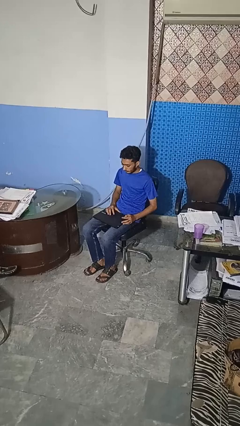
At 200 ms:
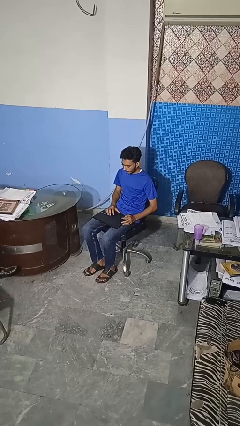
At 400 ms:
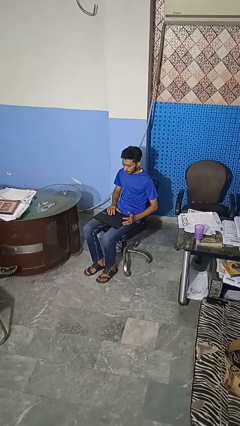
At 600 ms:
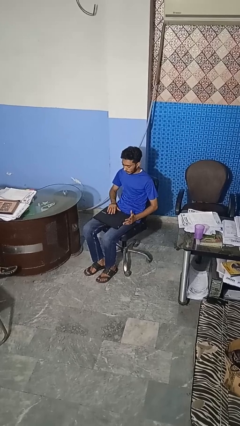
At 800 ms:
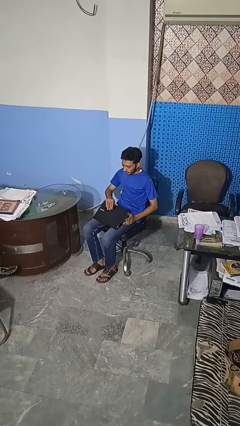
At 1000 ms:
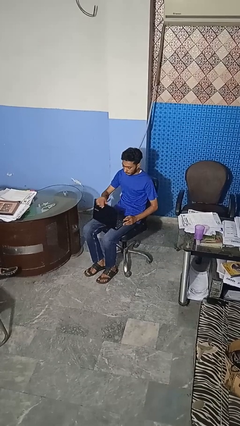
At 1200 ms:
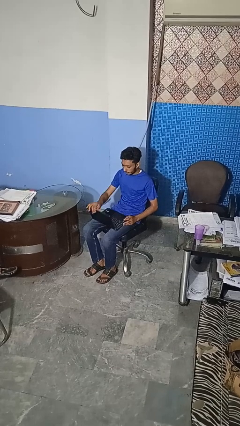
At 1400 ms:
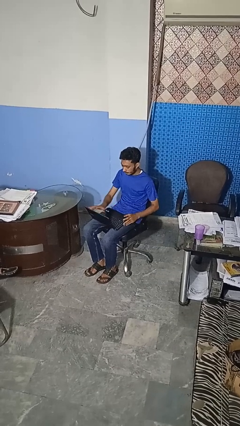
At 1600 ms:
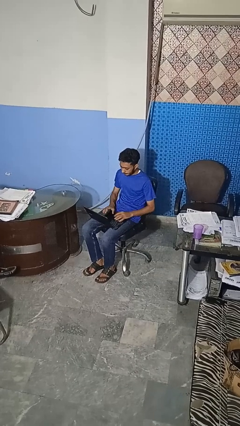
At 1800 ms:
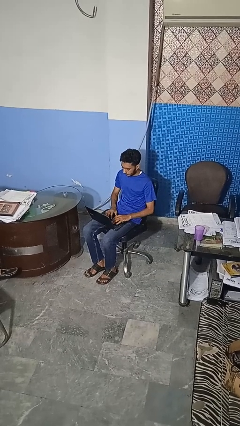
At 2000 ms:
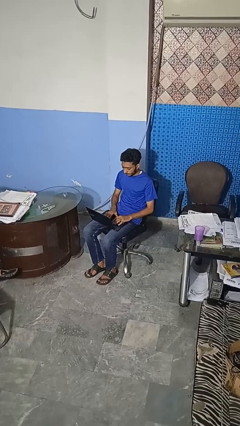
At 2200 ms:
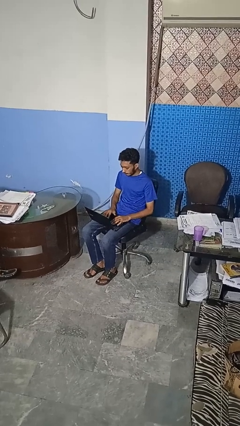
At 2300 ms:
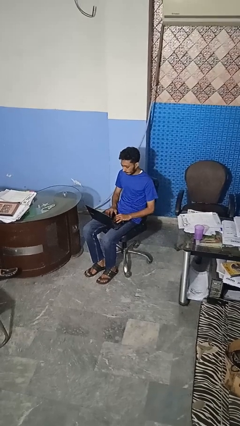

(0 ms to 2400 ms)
person opens laptop

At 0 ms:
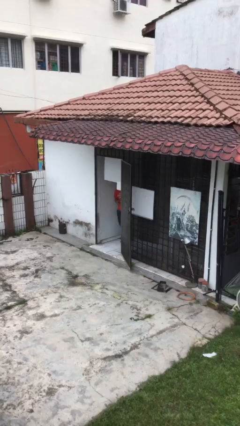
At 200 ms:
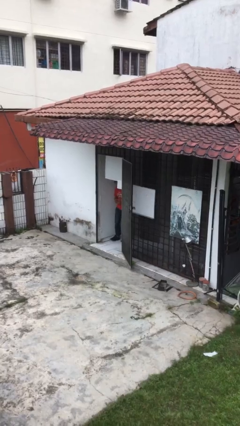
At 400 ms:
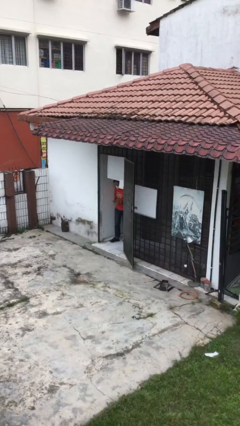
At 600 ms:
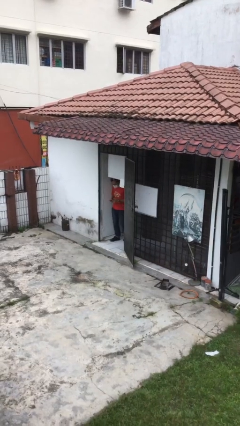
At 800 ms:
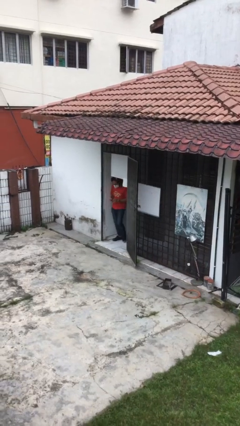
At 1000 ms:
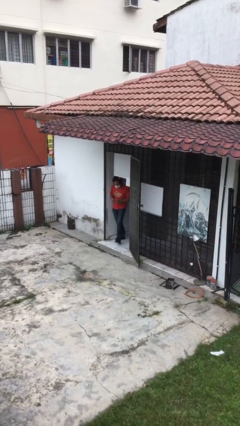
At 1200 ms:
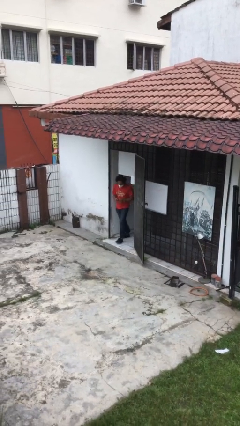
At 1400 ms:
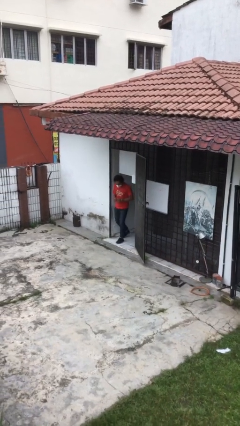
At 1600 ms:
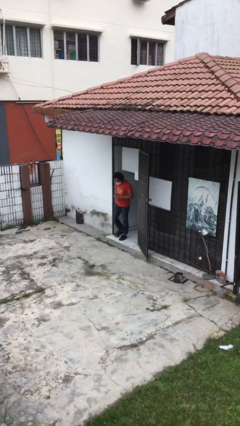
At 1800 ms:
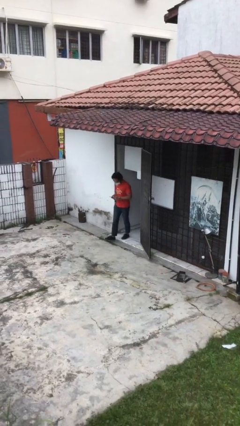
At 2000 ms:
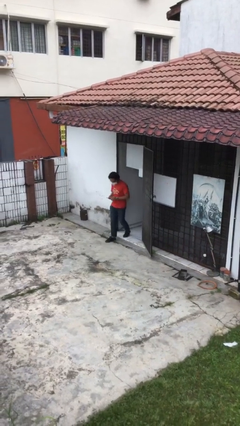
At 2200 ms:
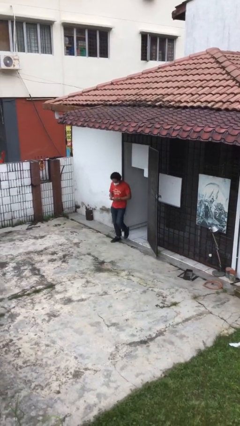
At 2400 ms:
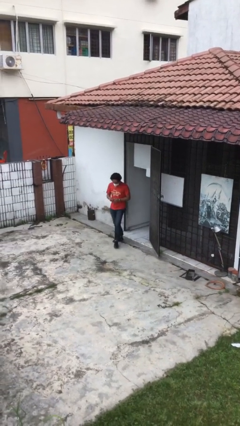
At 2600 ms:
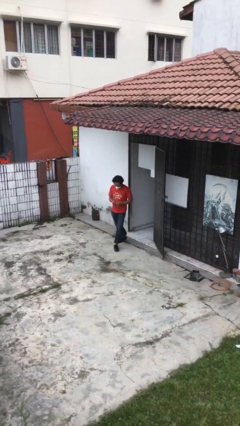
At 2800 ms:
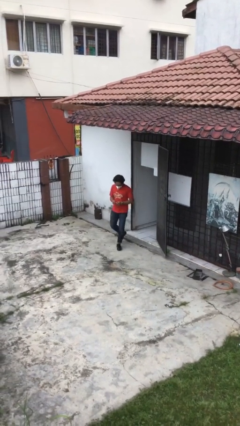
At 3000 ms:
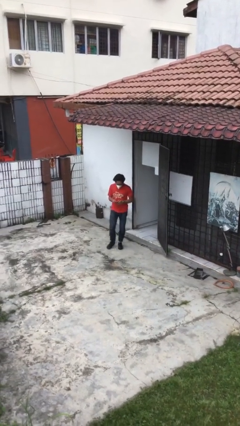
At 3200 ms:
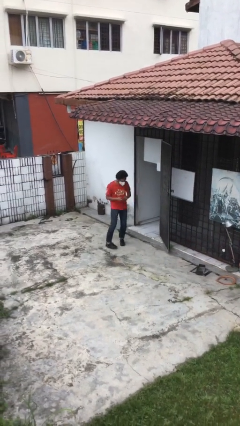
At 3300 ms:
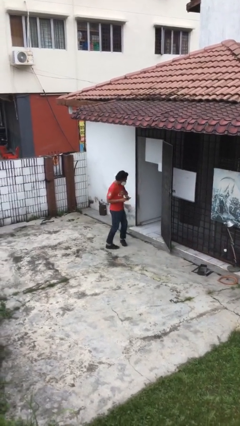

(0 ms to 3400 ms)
person enters scene through structure

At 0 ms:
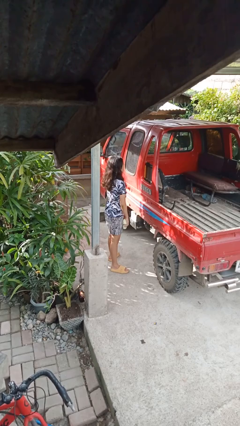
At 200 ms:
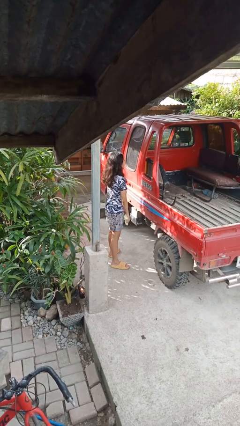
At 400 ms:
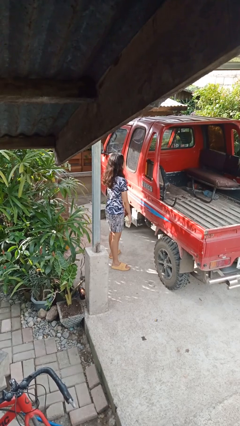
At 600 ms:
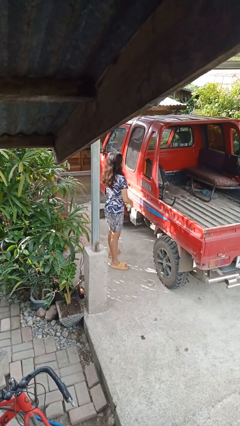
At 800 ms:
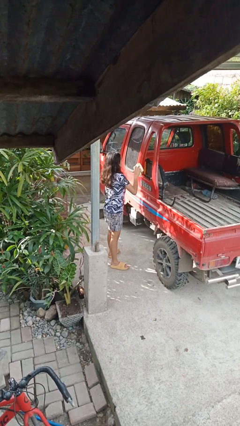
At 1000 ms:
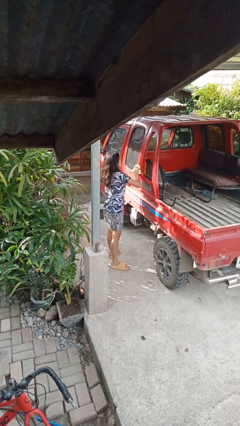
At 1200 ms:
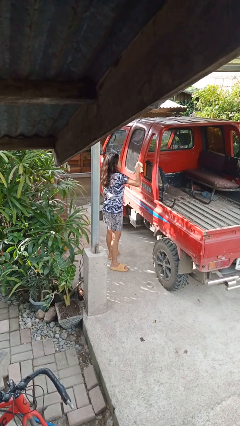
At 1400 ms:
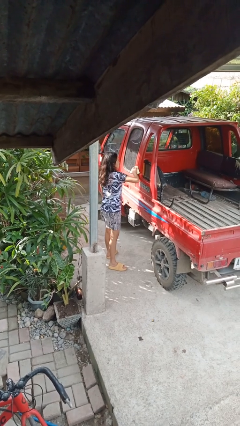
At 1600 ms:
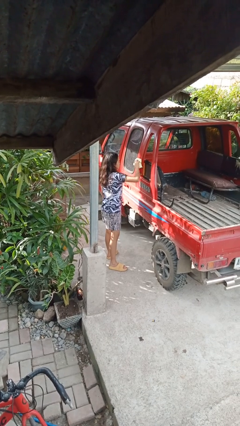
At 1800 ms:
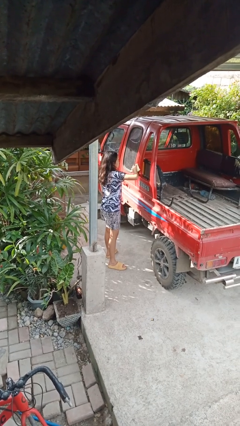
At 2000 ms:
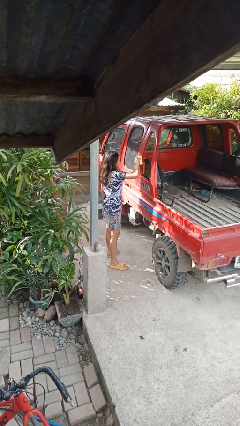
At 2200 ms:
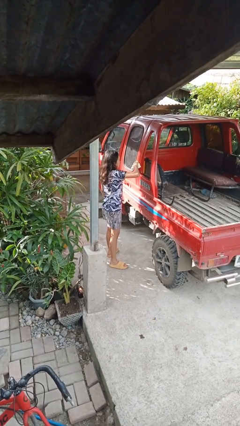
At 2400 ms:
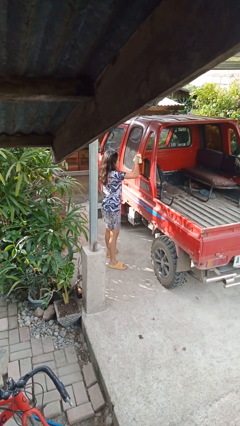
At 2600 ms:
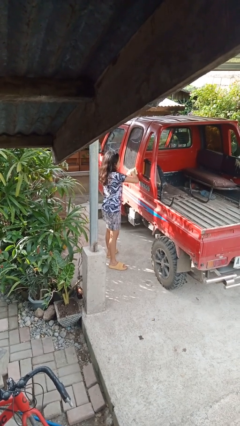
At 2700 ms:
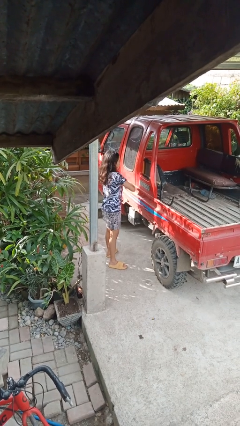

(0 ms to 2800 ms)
person polishes car with rag

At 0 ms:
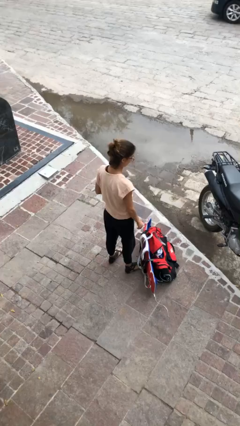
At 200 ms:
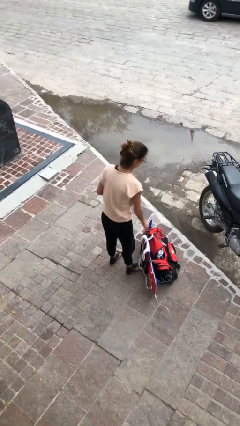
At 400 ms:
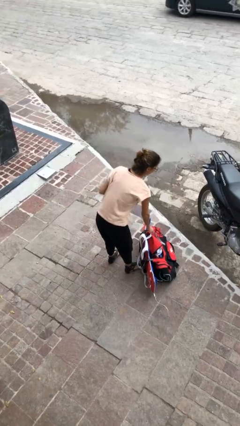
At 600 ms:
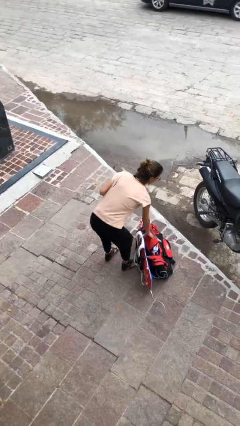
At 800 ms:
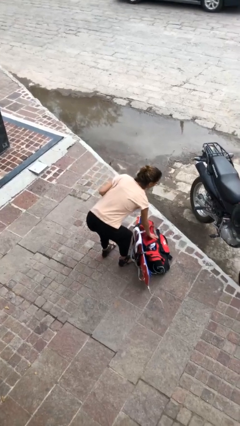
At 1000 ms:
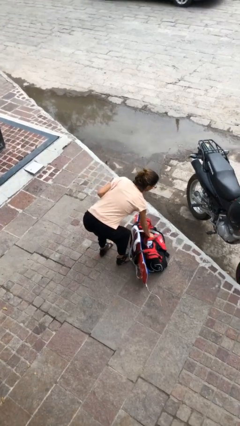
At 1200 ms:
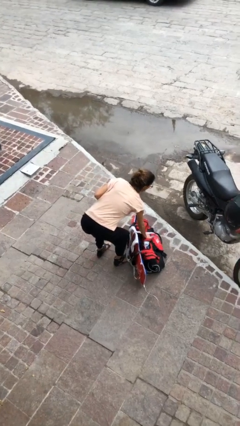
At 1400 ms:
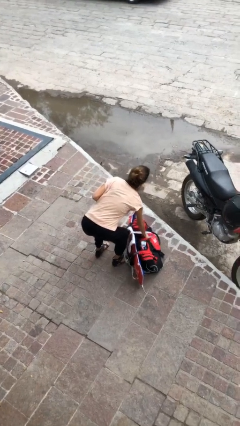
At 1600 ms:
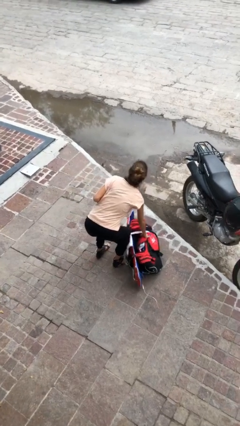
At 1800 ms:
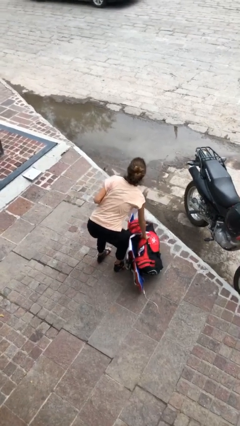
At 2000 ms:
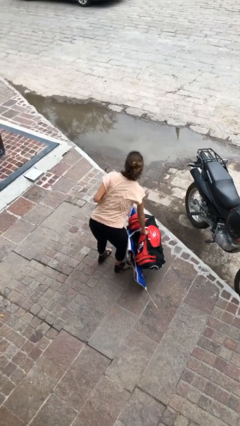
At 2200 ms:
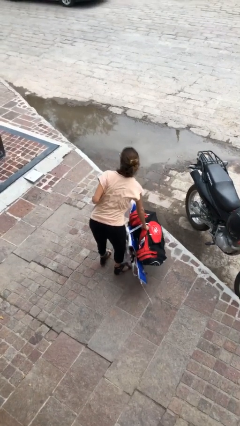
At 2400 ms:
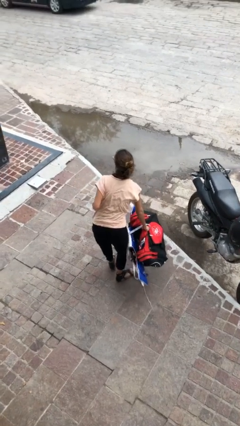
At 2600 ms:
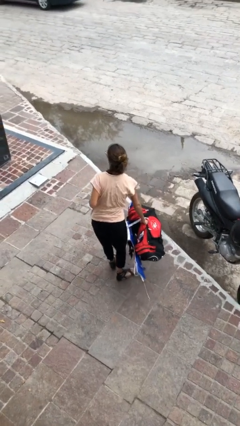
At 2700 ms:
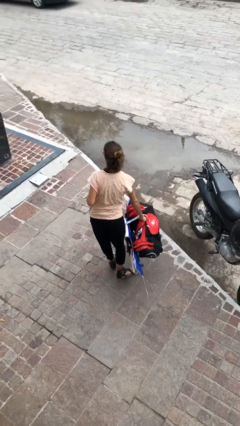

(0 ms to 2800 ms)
person picks up object from floor

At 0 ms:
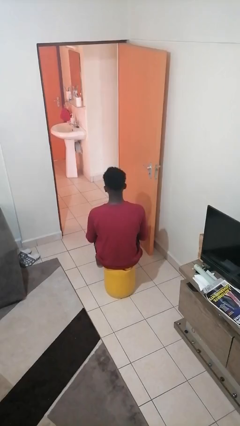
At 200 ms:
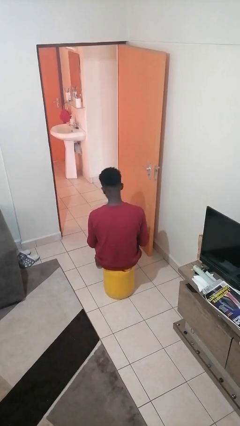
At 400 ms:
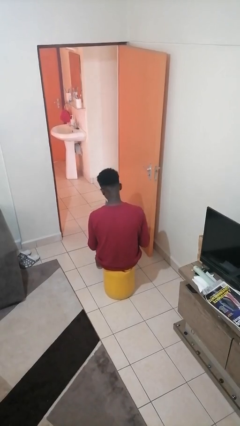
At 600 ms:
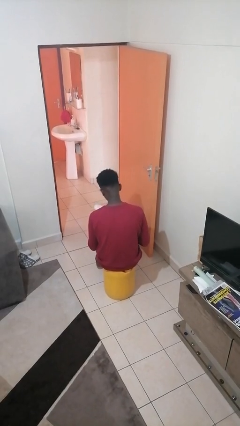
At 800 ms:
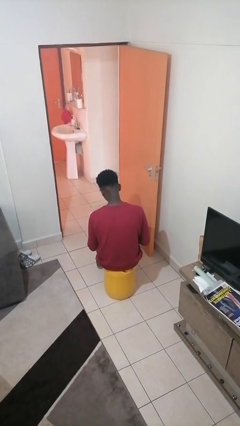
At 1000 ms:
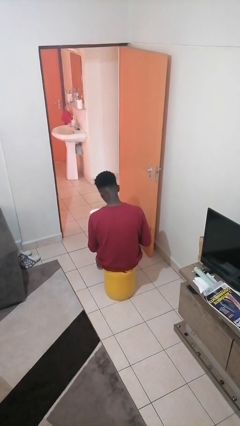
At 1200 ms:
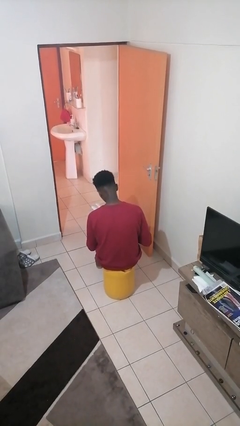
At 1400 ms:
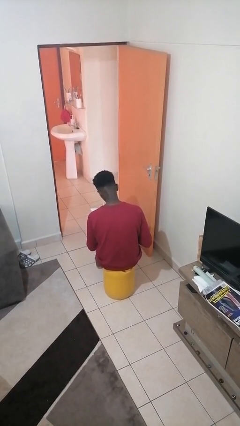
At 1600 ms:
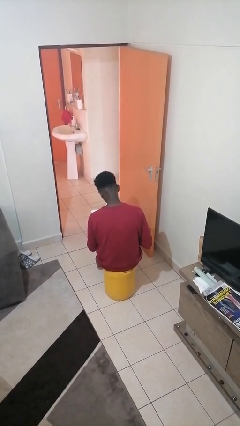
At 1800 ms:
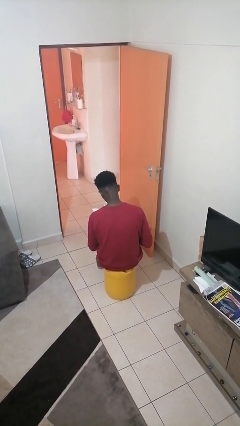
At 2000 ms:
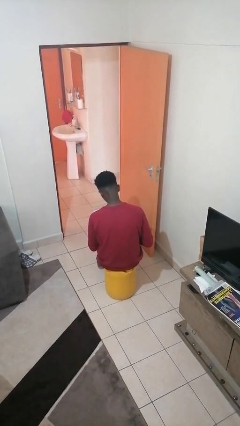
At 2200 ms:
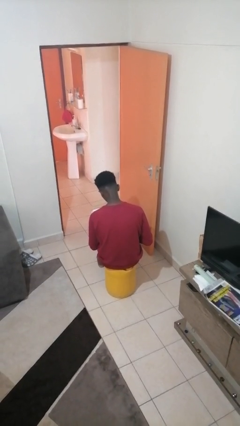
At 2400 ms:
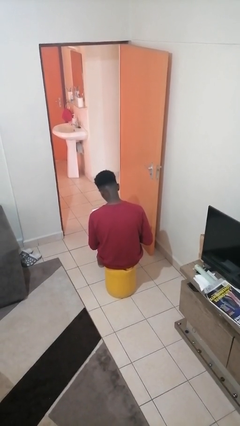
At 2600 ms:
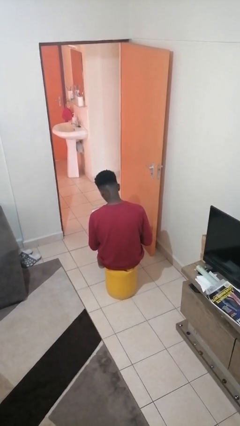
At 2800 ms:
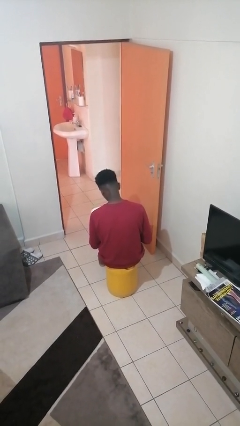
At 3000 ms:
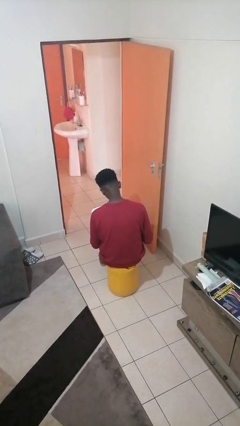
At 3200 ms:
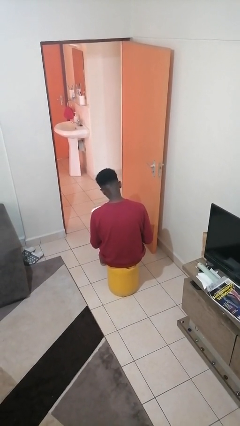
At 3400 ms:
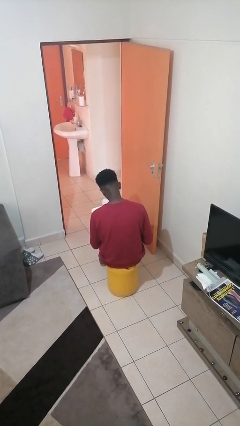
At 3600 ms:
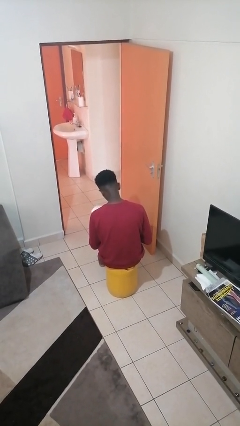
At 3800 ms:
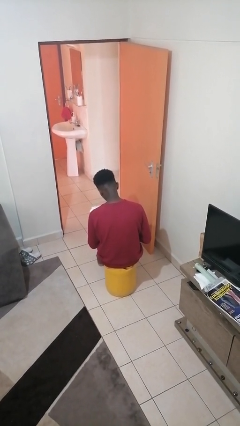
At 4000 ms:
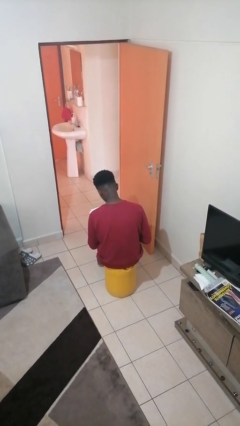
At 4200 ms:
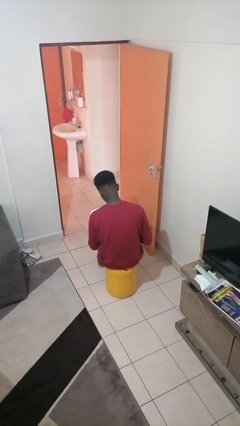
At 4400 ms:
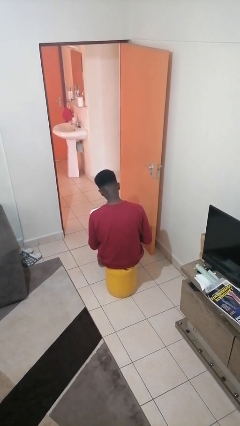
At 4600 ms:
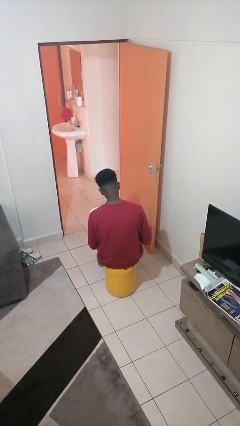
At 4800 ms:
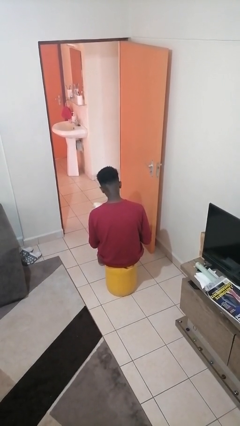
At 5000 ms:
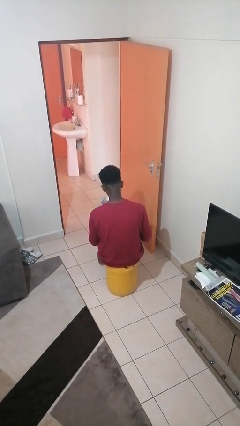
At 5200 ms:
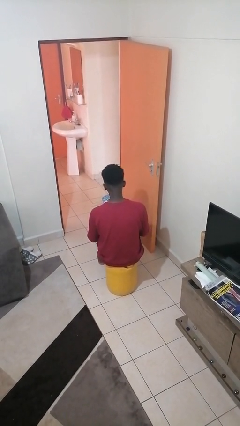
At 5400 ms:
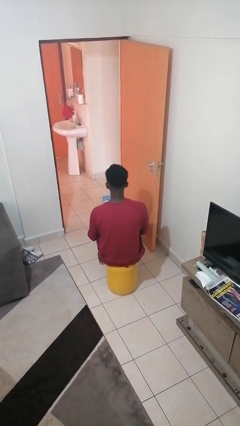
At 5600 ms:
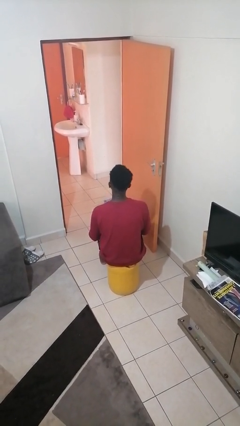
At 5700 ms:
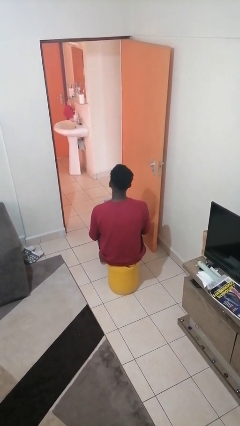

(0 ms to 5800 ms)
person reads book
